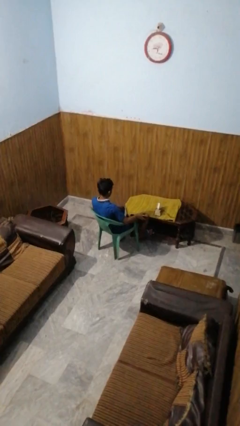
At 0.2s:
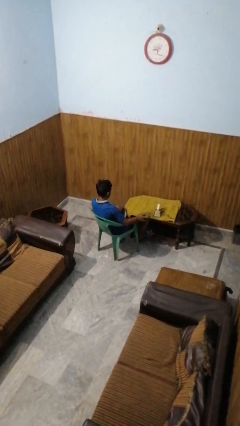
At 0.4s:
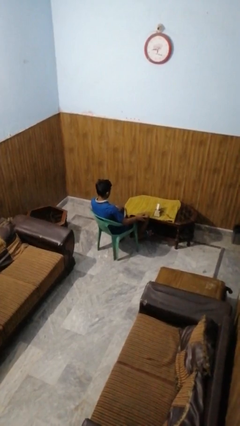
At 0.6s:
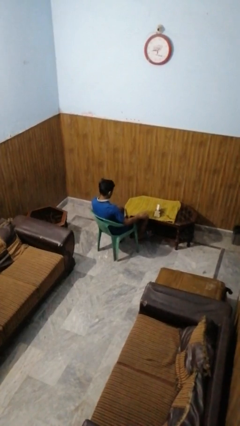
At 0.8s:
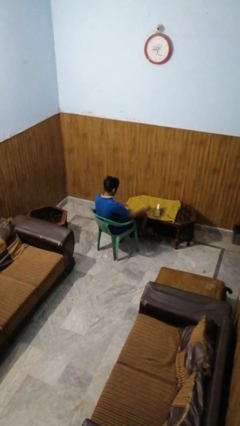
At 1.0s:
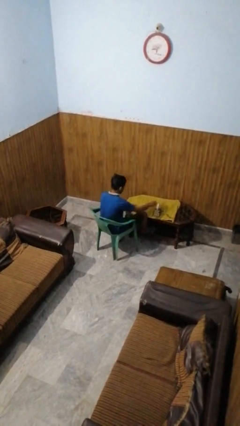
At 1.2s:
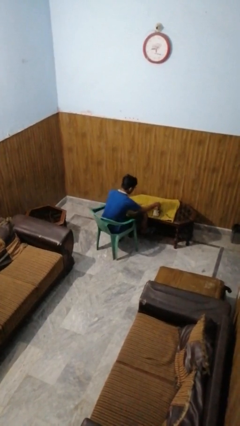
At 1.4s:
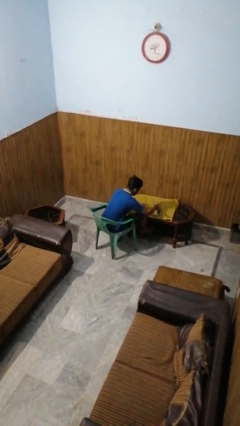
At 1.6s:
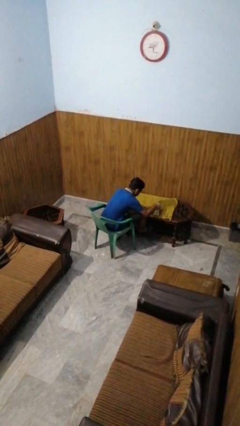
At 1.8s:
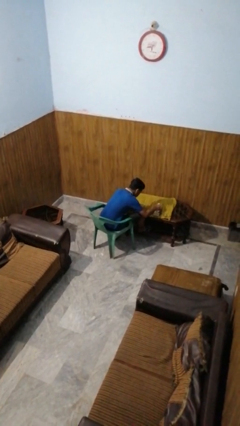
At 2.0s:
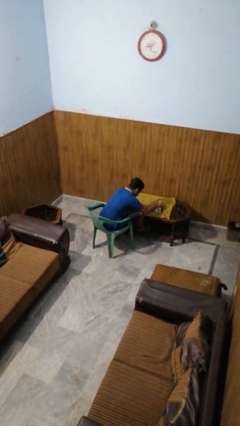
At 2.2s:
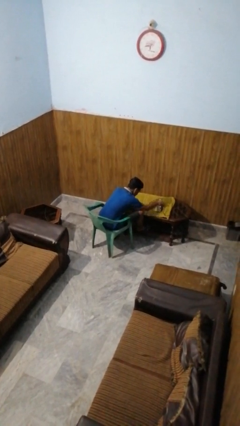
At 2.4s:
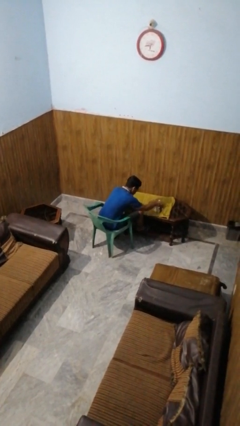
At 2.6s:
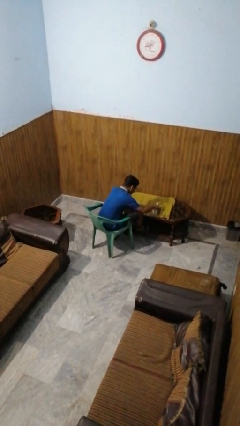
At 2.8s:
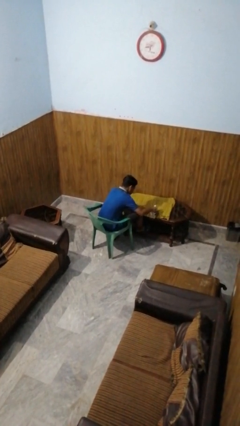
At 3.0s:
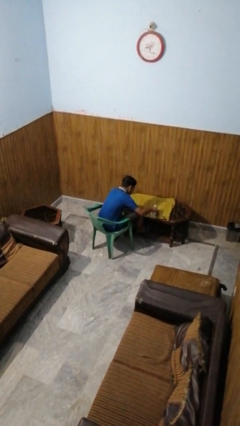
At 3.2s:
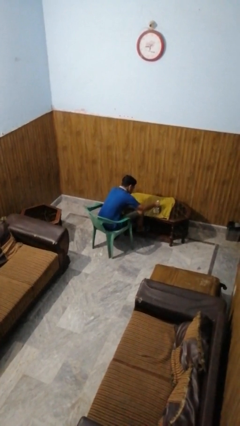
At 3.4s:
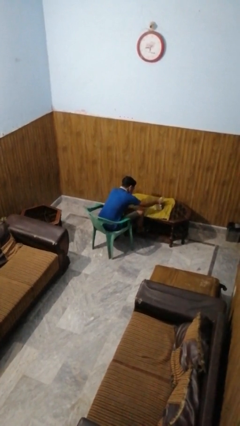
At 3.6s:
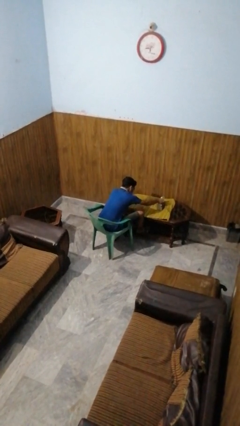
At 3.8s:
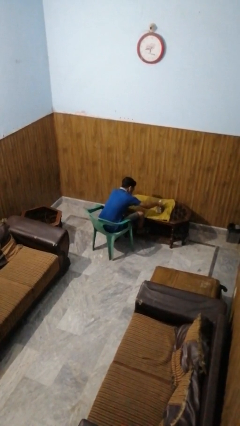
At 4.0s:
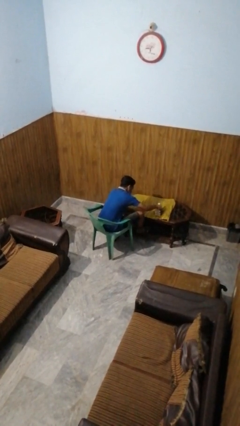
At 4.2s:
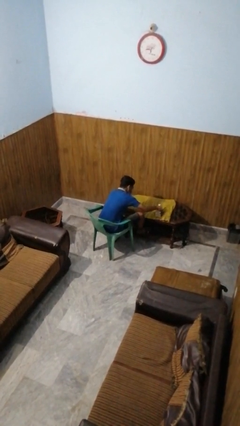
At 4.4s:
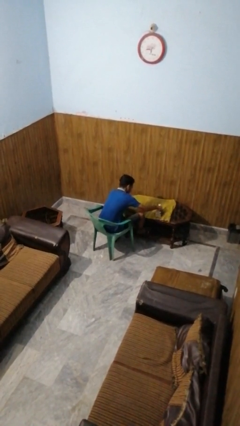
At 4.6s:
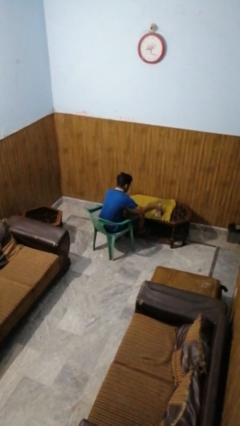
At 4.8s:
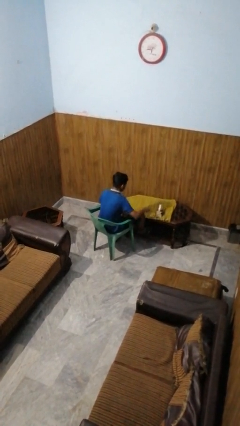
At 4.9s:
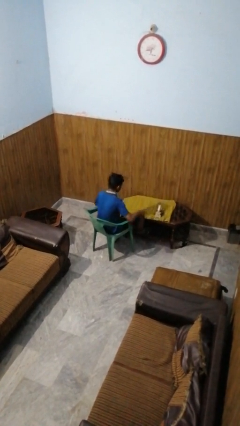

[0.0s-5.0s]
person irons clothes

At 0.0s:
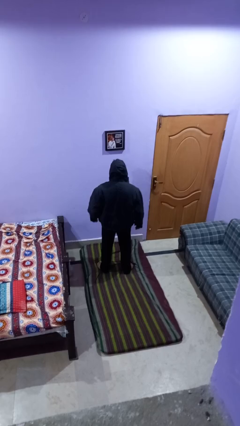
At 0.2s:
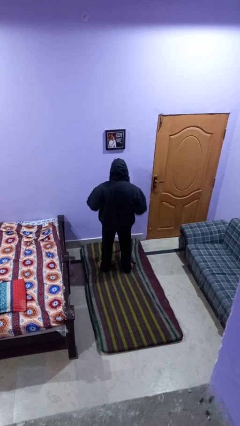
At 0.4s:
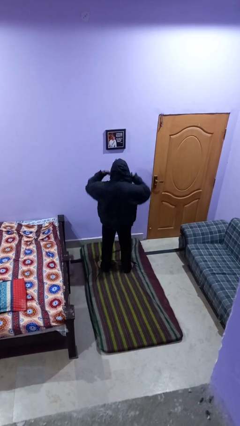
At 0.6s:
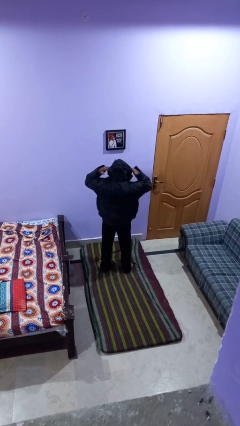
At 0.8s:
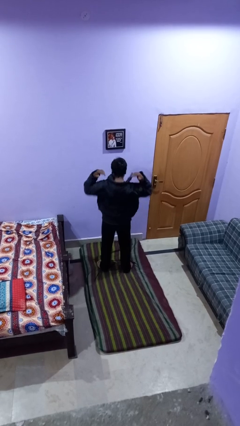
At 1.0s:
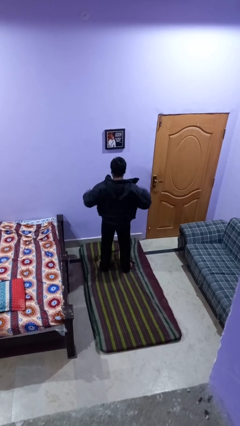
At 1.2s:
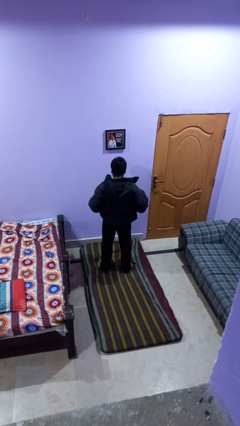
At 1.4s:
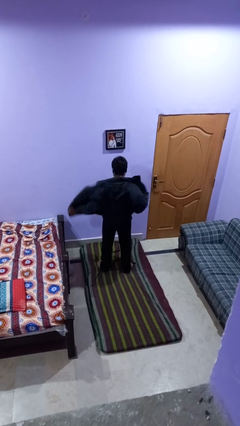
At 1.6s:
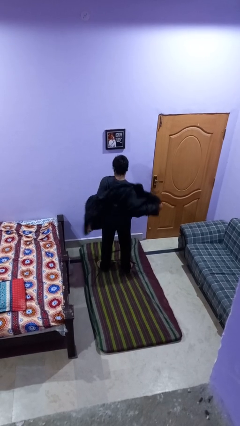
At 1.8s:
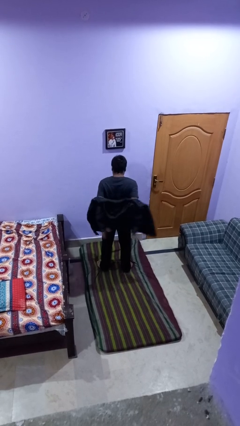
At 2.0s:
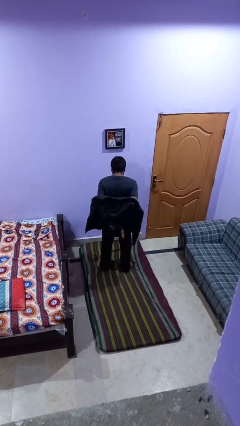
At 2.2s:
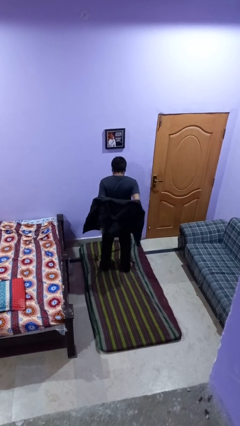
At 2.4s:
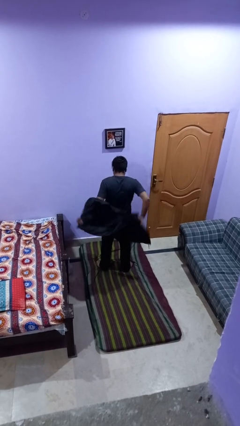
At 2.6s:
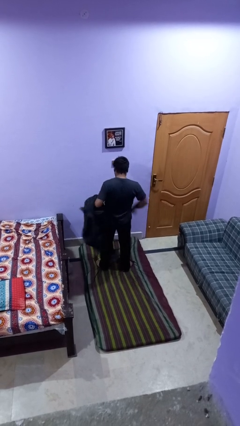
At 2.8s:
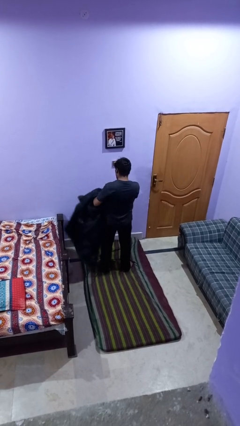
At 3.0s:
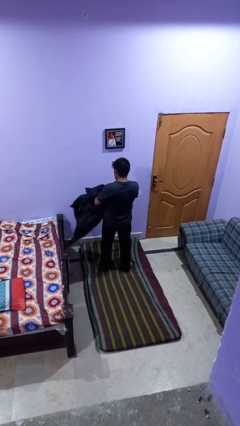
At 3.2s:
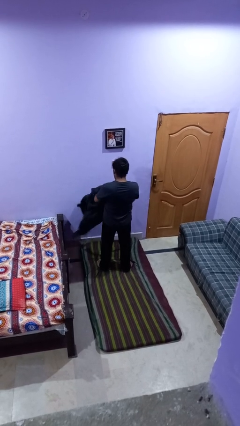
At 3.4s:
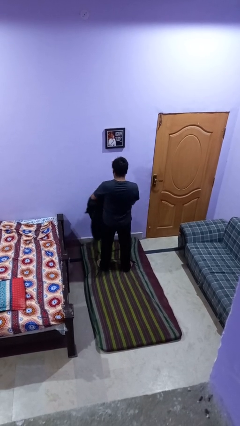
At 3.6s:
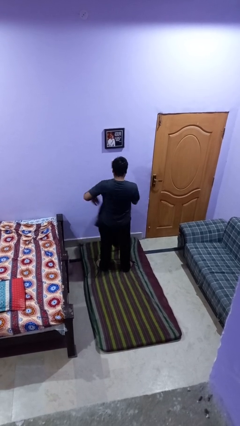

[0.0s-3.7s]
person takes off hoodie

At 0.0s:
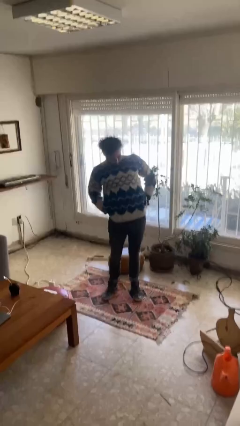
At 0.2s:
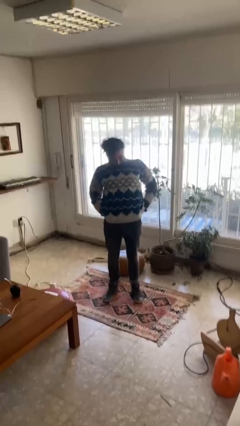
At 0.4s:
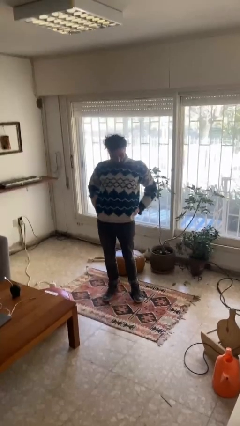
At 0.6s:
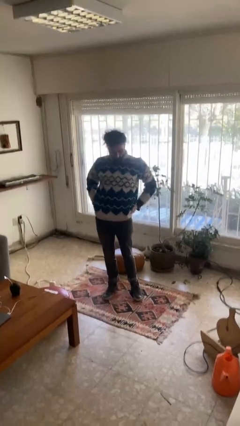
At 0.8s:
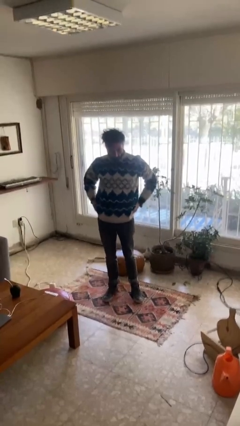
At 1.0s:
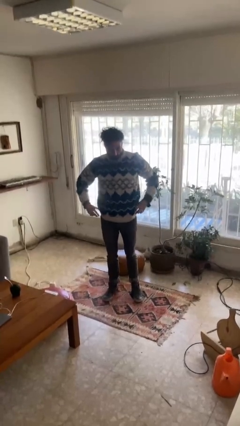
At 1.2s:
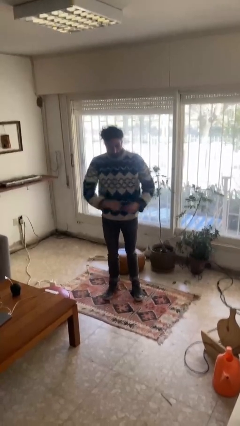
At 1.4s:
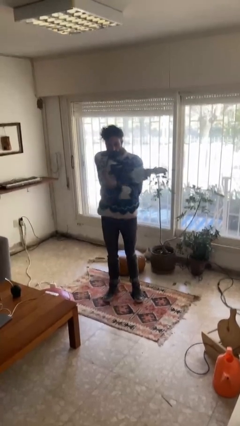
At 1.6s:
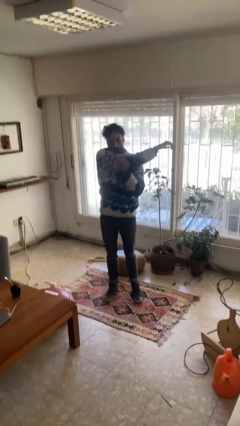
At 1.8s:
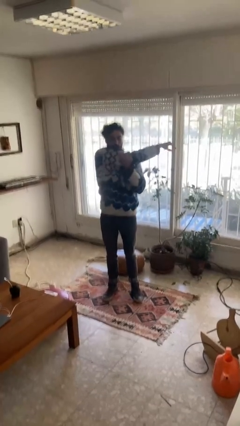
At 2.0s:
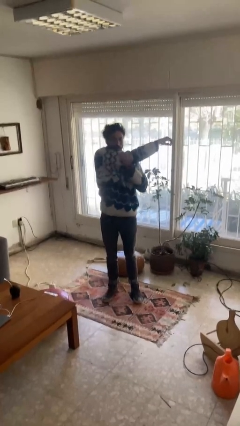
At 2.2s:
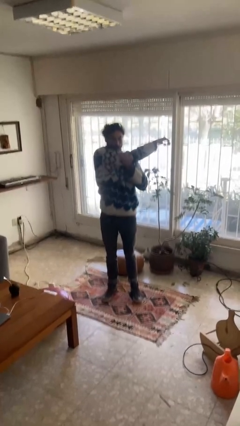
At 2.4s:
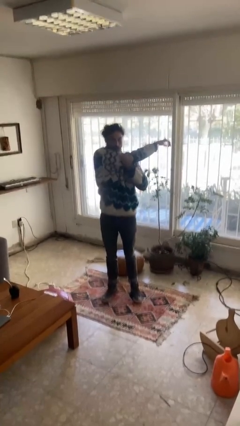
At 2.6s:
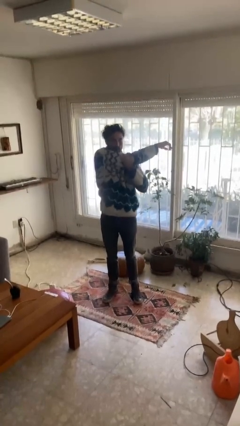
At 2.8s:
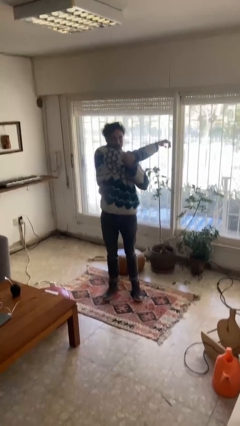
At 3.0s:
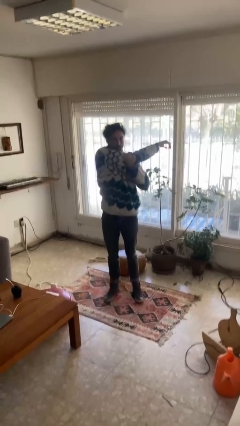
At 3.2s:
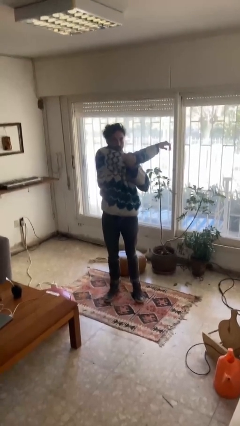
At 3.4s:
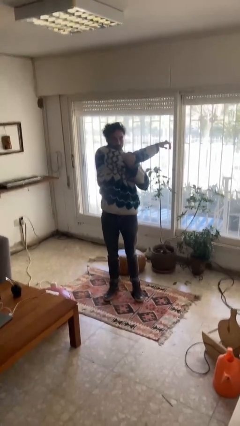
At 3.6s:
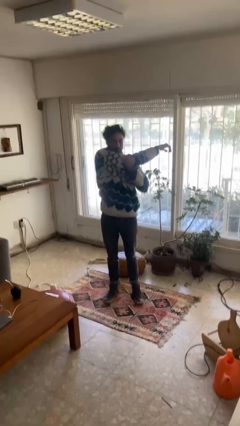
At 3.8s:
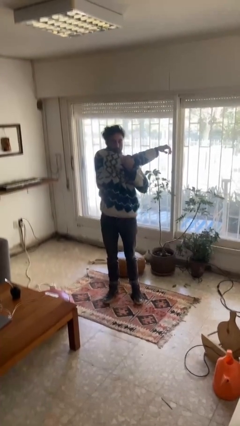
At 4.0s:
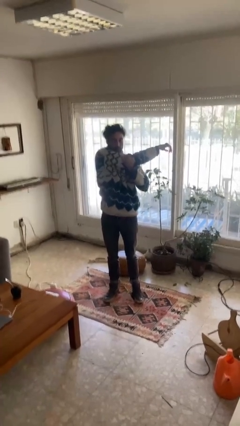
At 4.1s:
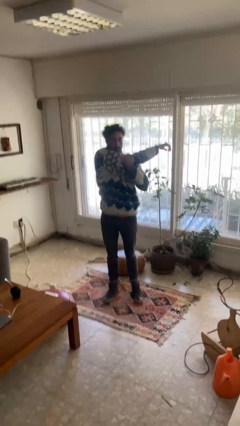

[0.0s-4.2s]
person stretches arms to side

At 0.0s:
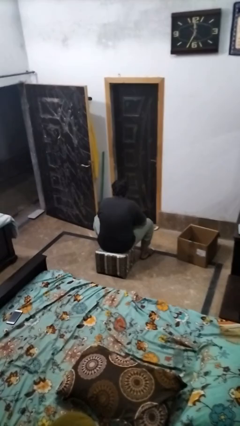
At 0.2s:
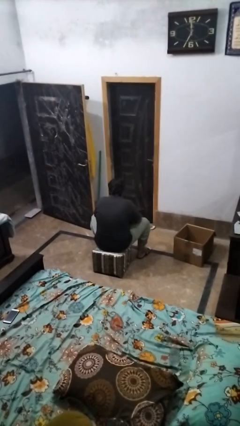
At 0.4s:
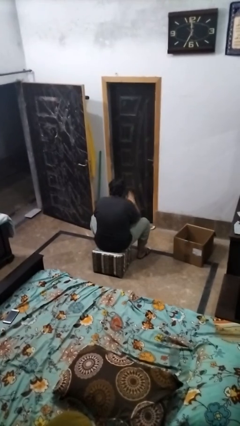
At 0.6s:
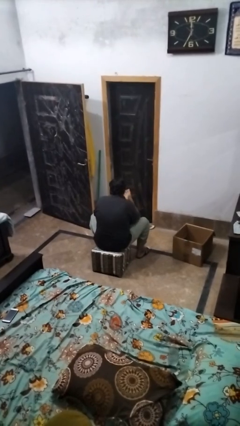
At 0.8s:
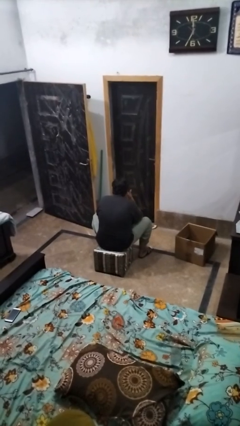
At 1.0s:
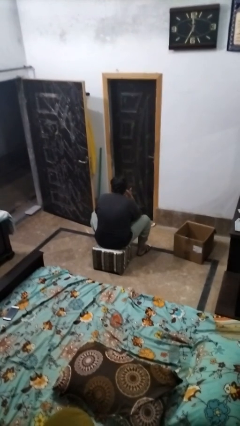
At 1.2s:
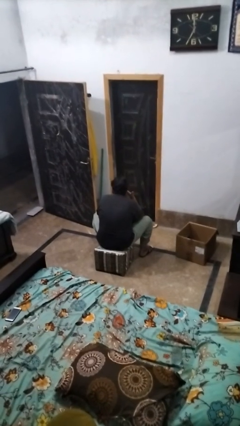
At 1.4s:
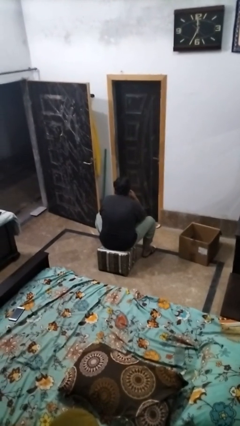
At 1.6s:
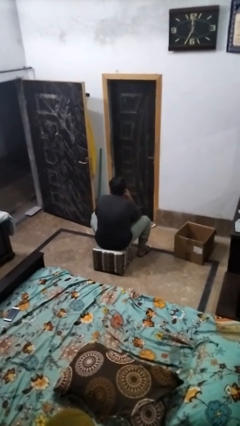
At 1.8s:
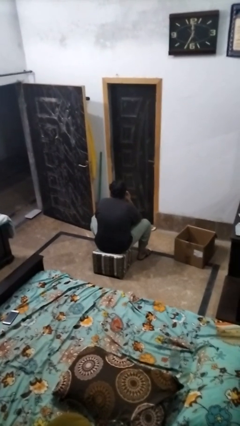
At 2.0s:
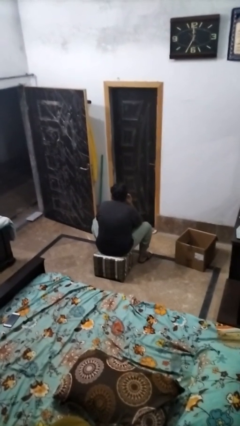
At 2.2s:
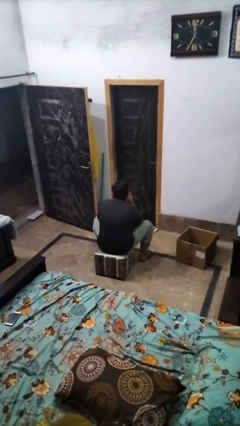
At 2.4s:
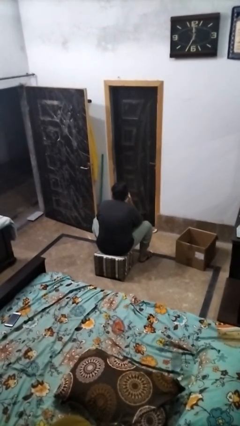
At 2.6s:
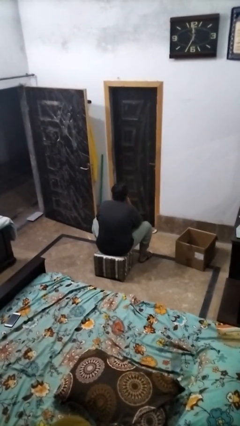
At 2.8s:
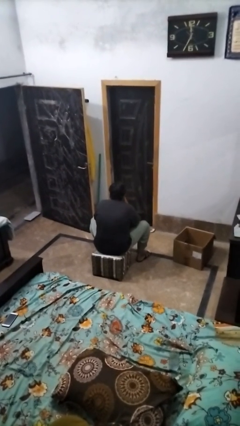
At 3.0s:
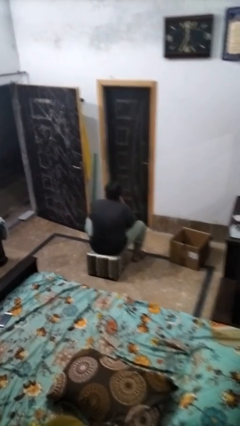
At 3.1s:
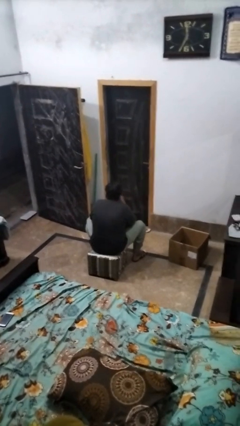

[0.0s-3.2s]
person strokes chin

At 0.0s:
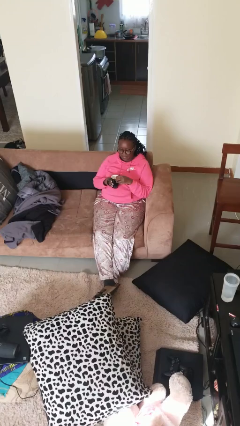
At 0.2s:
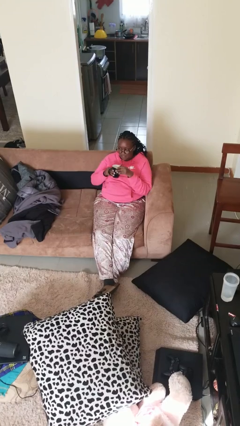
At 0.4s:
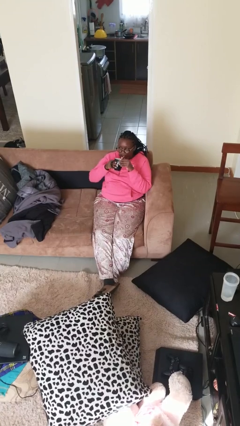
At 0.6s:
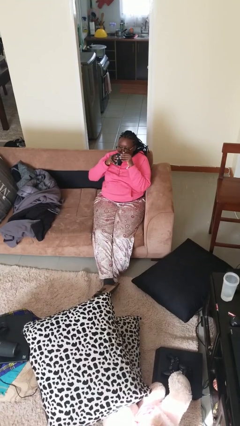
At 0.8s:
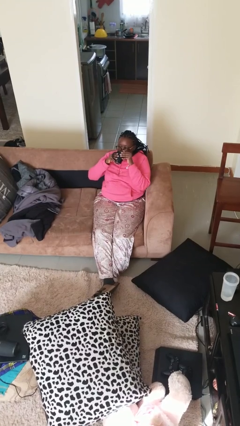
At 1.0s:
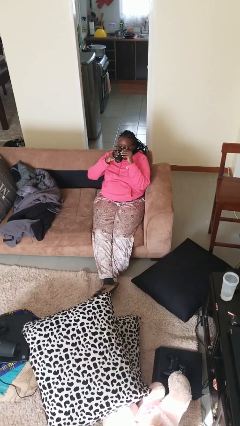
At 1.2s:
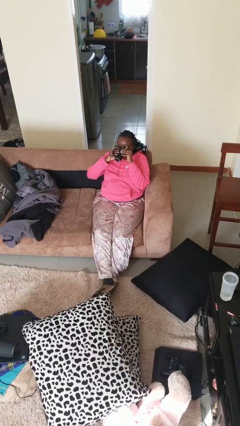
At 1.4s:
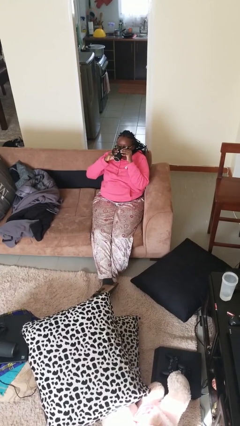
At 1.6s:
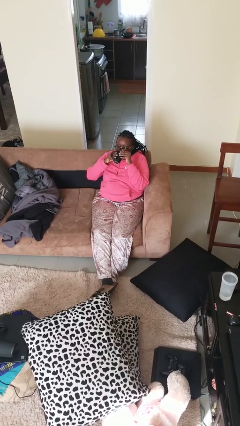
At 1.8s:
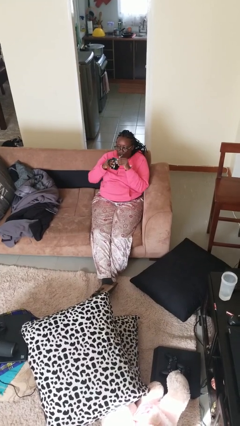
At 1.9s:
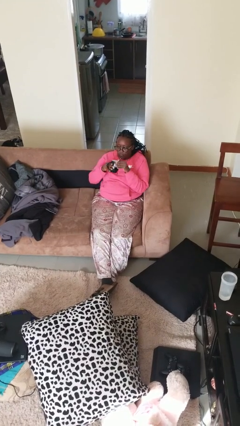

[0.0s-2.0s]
person drinks from mug
